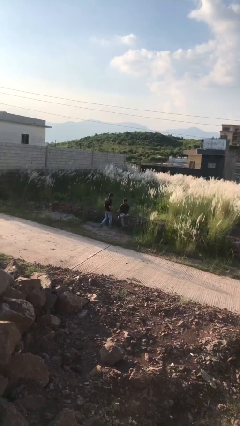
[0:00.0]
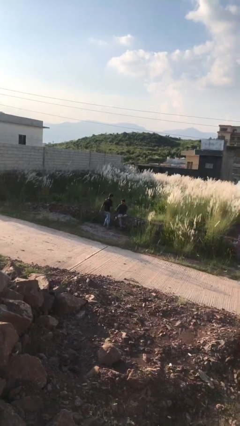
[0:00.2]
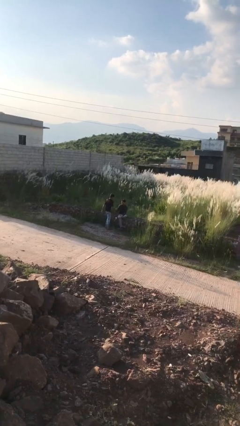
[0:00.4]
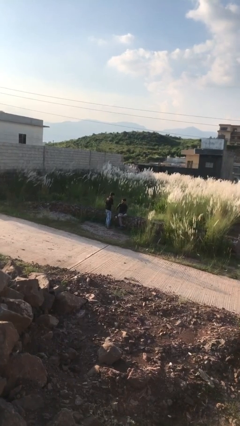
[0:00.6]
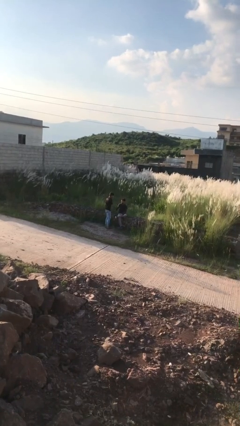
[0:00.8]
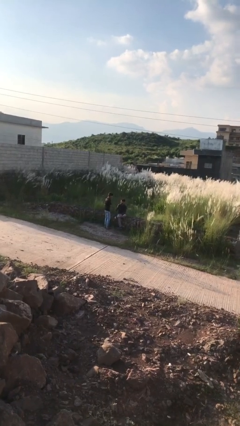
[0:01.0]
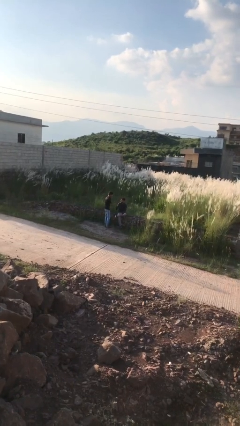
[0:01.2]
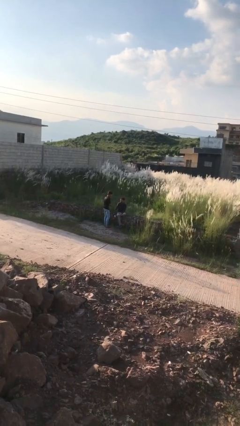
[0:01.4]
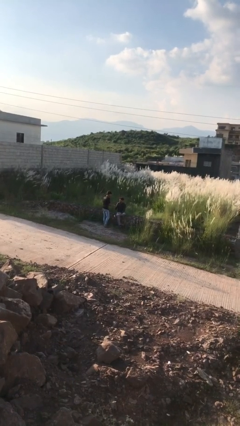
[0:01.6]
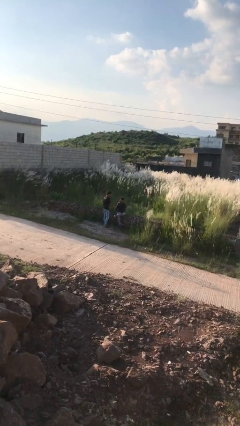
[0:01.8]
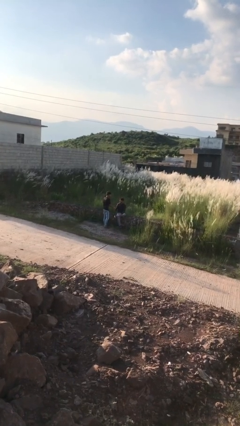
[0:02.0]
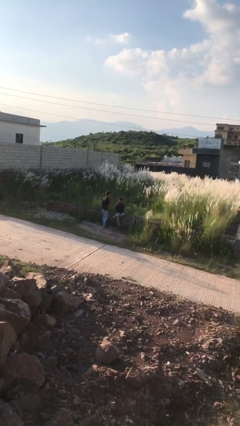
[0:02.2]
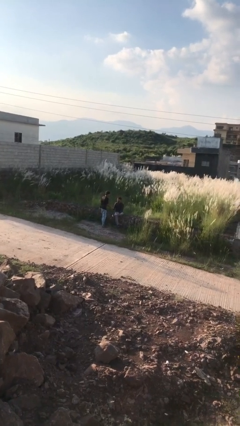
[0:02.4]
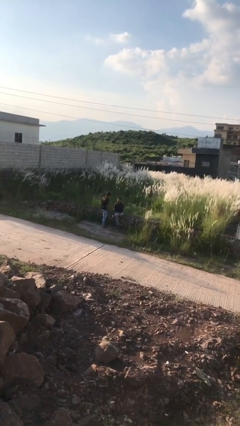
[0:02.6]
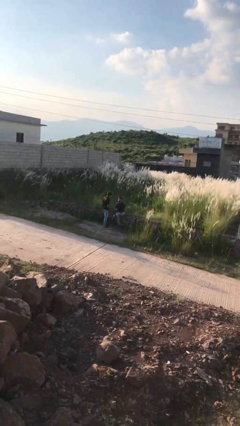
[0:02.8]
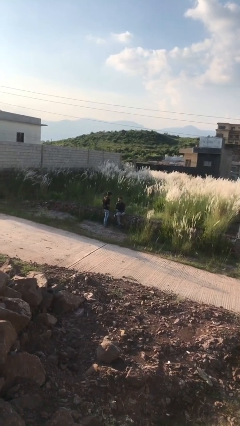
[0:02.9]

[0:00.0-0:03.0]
person shakes hand

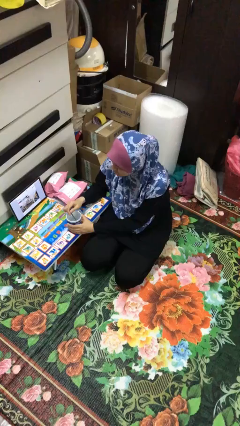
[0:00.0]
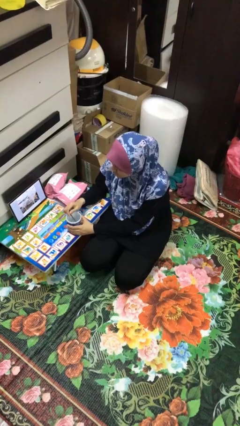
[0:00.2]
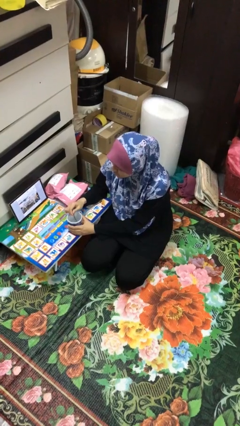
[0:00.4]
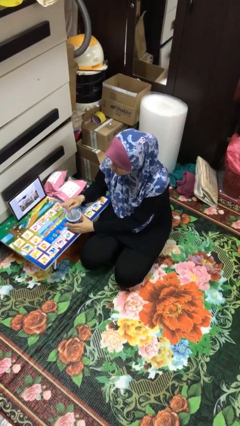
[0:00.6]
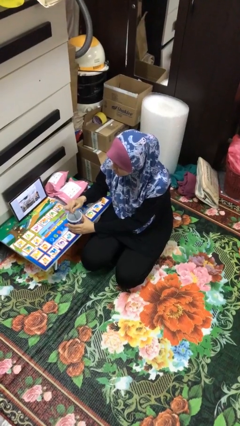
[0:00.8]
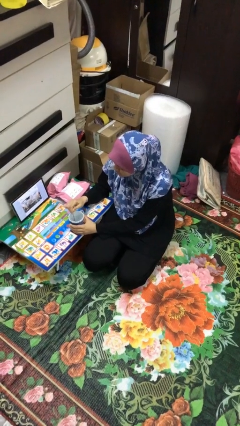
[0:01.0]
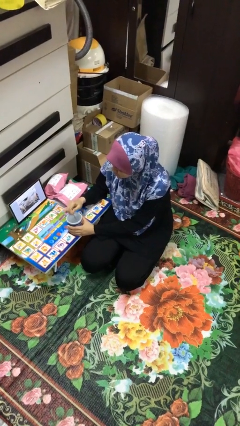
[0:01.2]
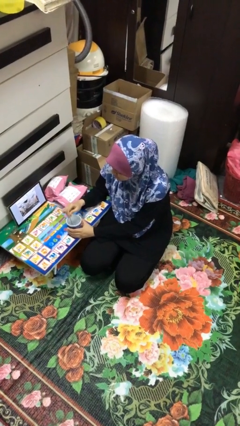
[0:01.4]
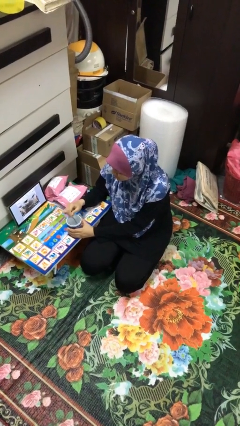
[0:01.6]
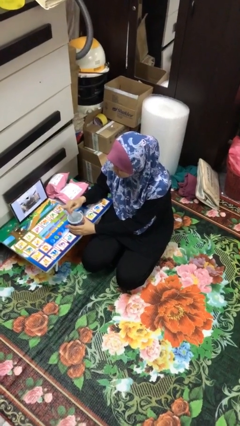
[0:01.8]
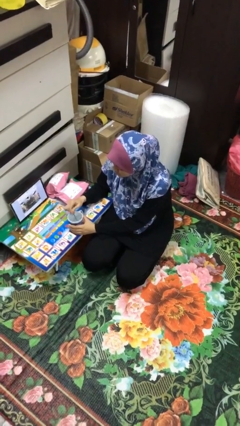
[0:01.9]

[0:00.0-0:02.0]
person stirs mug

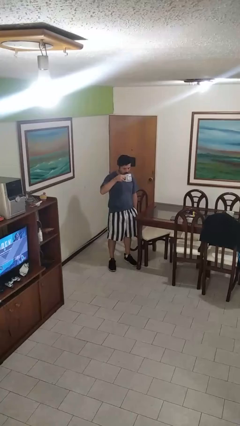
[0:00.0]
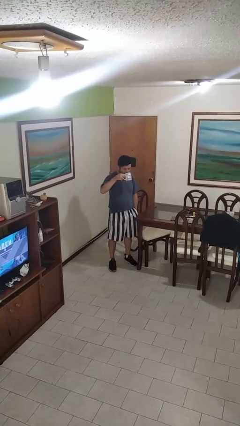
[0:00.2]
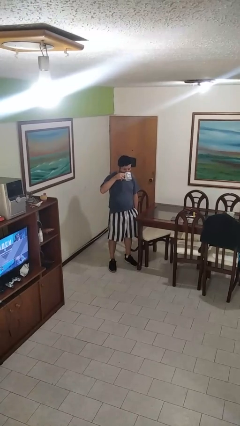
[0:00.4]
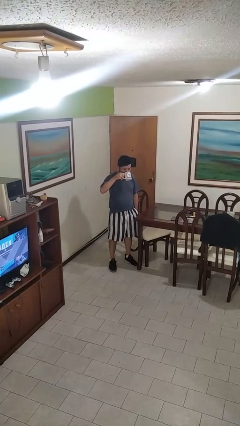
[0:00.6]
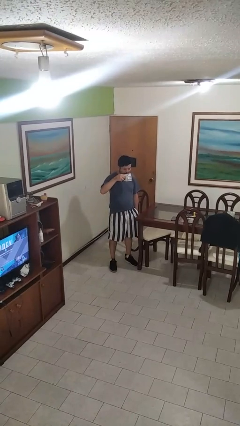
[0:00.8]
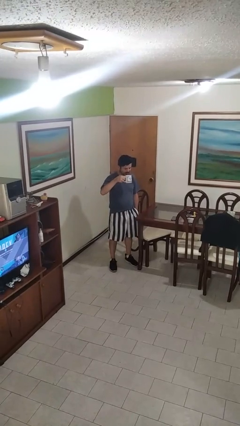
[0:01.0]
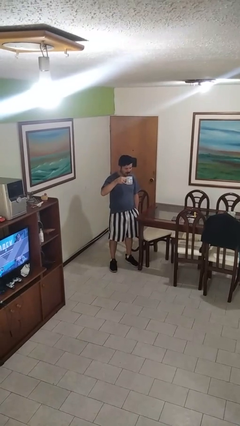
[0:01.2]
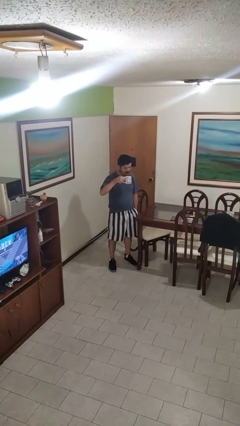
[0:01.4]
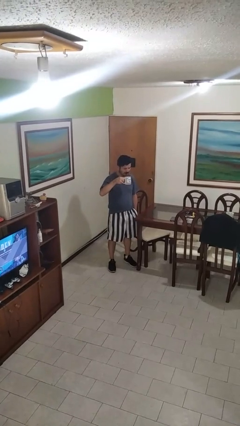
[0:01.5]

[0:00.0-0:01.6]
person drinks from mug

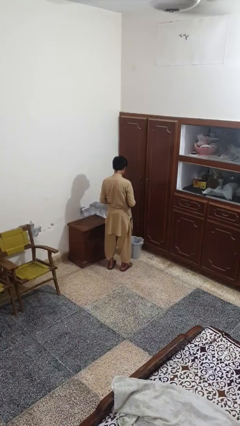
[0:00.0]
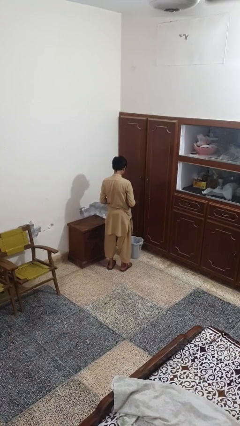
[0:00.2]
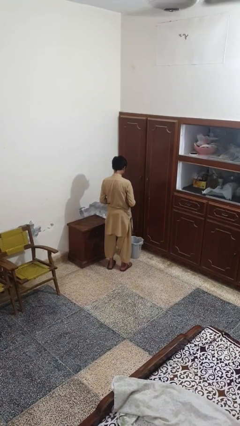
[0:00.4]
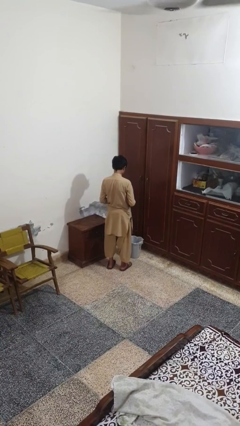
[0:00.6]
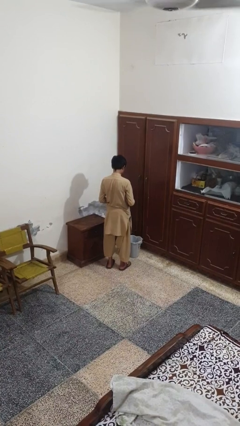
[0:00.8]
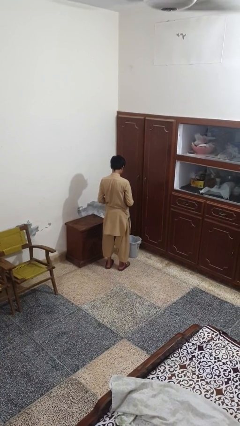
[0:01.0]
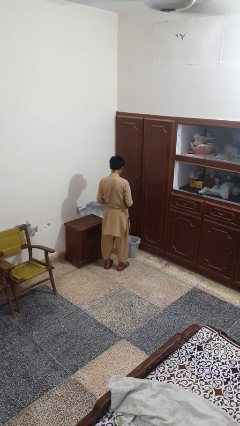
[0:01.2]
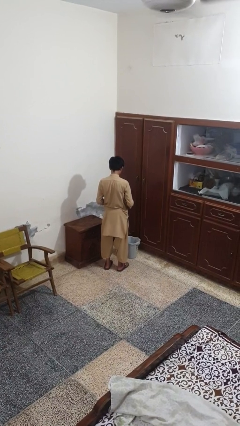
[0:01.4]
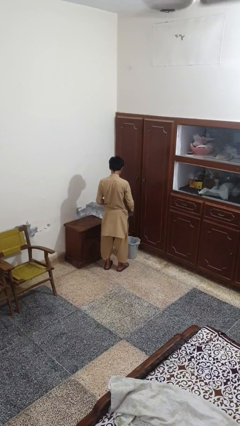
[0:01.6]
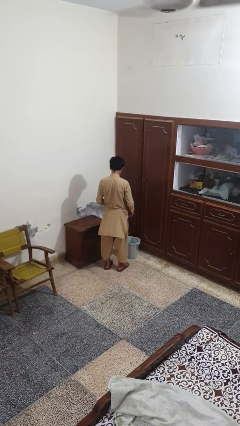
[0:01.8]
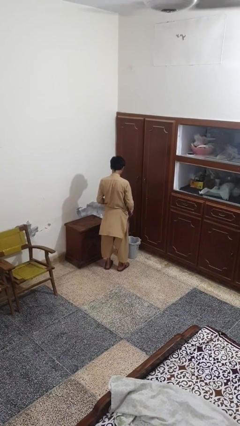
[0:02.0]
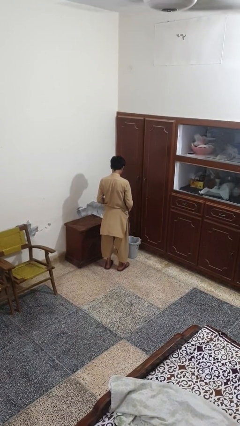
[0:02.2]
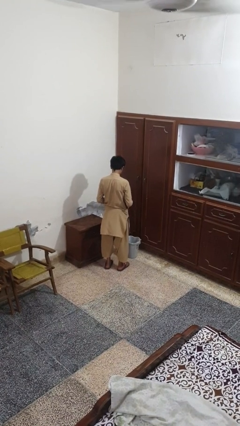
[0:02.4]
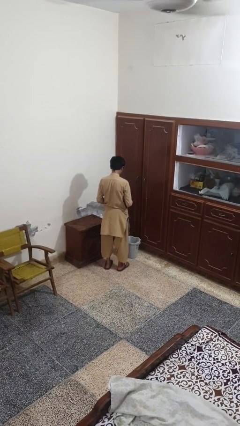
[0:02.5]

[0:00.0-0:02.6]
person discards trash

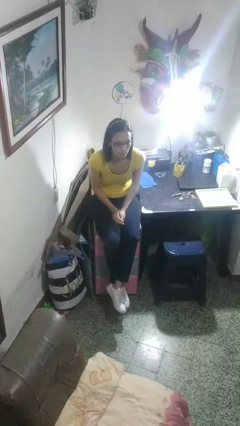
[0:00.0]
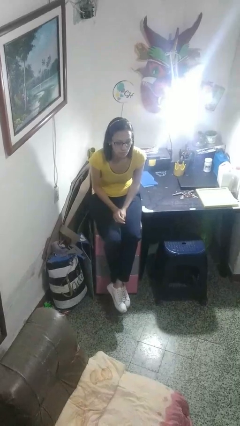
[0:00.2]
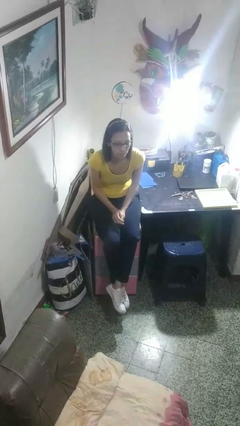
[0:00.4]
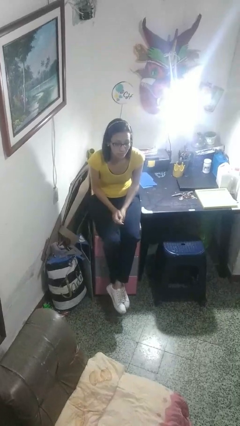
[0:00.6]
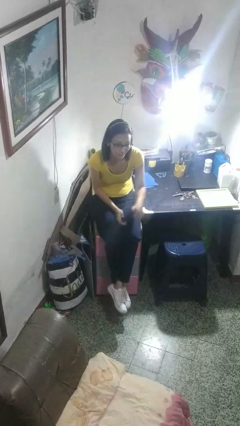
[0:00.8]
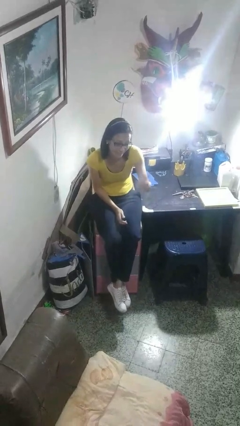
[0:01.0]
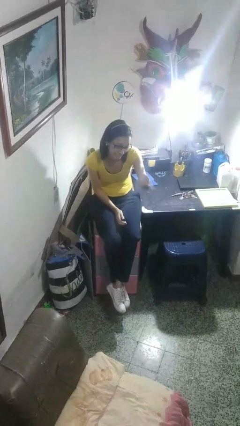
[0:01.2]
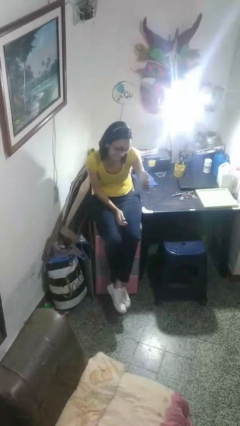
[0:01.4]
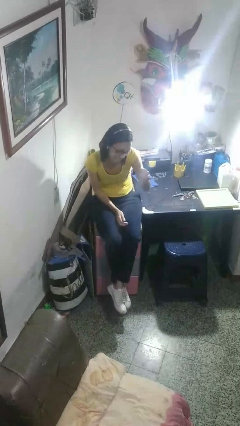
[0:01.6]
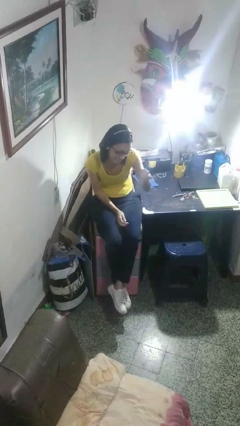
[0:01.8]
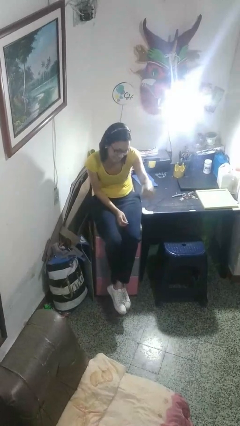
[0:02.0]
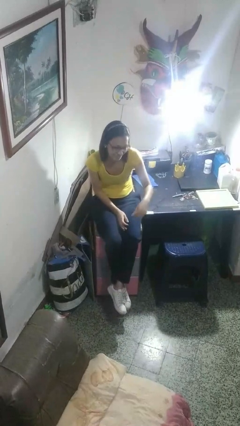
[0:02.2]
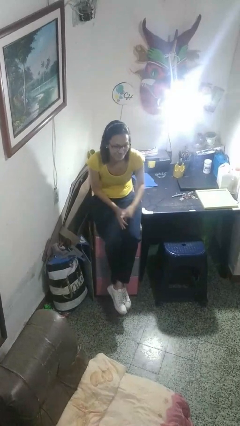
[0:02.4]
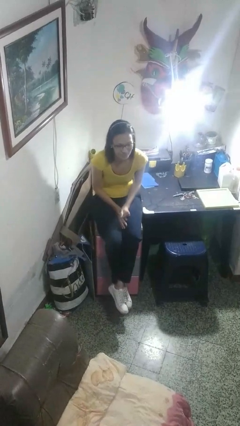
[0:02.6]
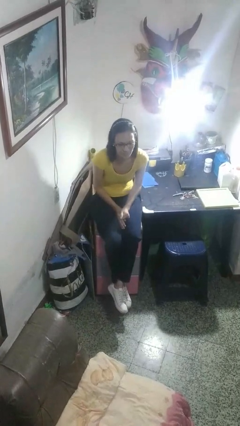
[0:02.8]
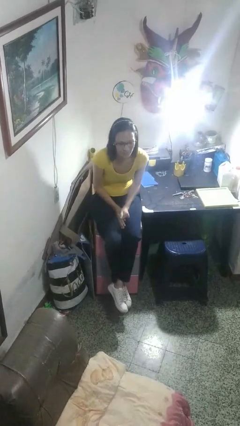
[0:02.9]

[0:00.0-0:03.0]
person gestures hang loose

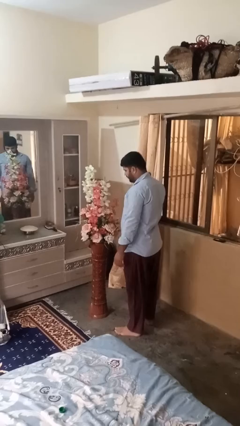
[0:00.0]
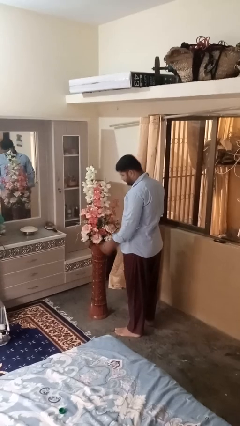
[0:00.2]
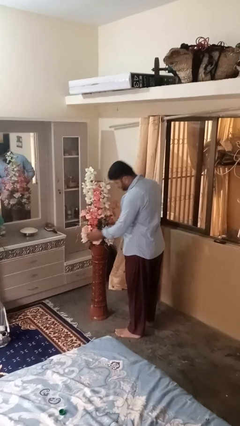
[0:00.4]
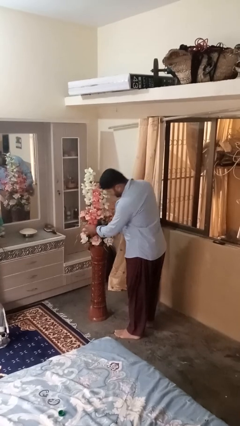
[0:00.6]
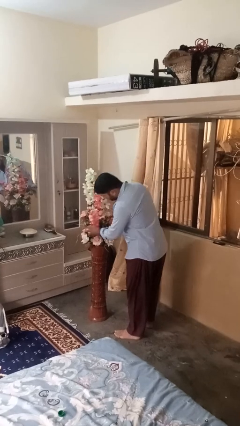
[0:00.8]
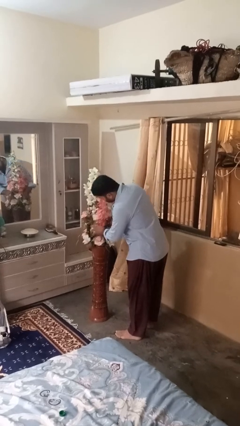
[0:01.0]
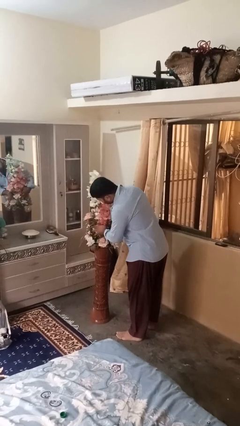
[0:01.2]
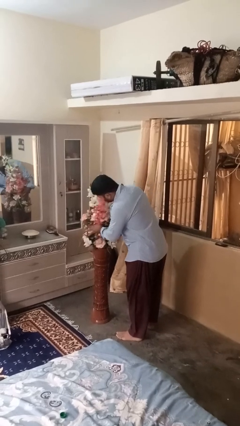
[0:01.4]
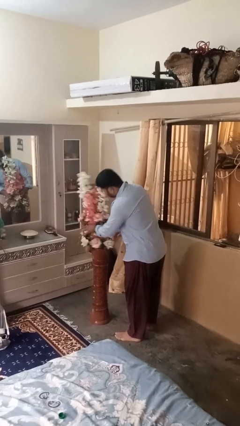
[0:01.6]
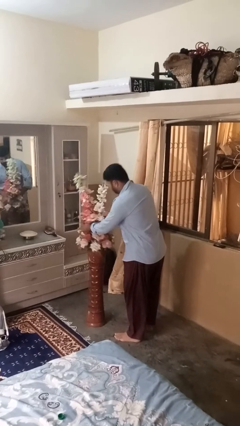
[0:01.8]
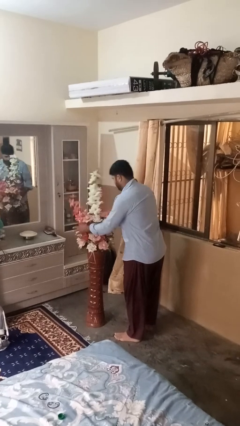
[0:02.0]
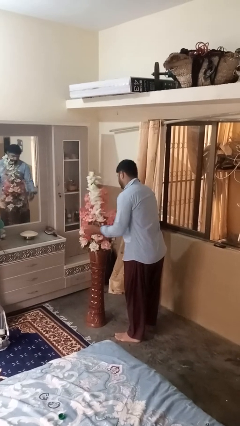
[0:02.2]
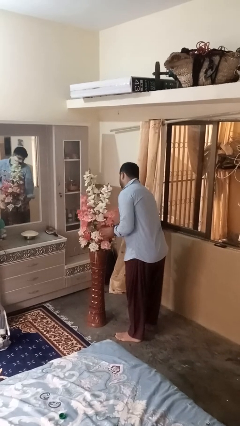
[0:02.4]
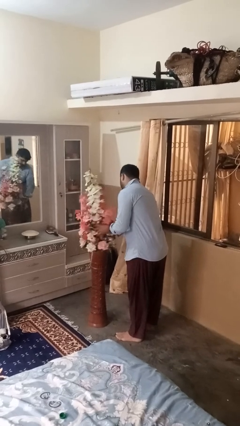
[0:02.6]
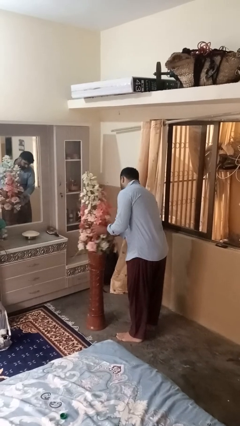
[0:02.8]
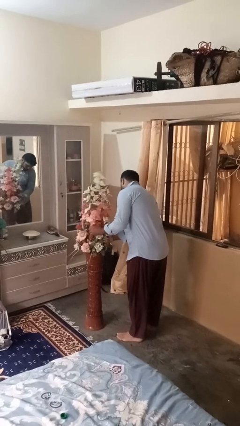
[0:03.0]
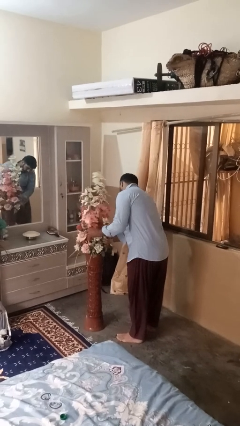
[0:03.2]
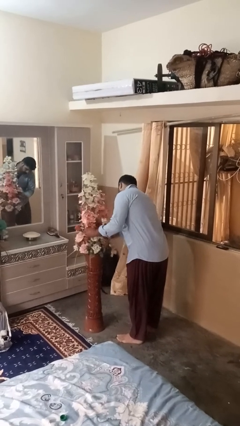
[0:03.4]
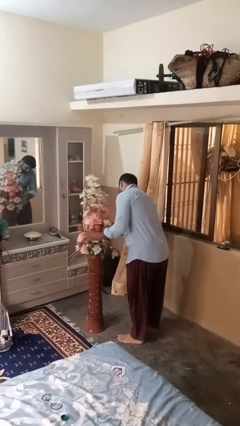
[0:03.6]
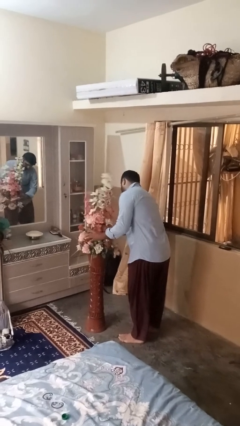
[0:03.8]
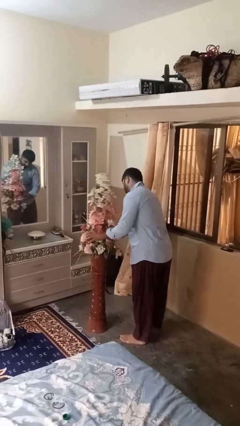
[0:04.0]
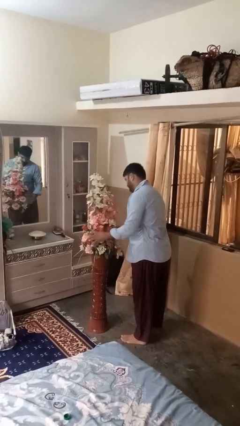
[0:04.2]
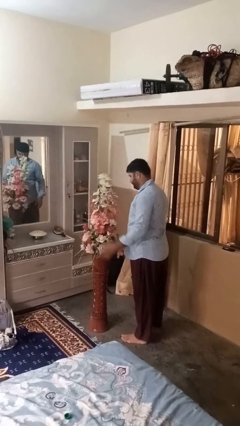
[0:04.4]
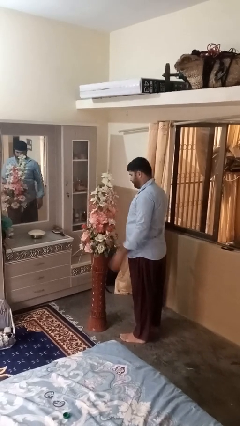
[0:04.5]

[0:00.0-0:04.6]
person arranges flowers in vase

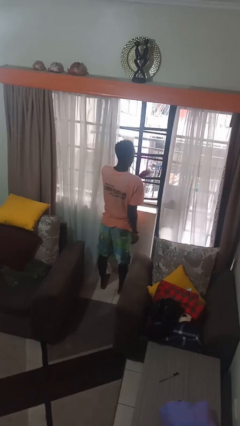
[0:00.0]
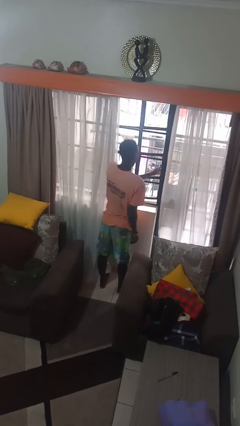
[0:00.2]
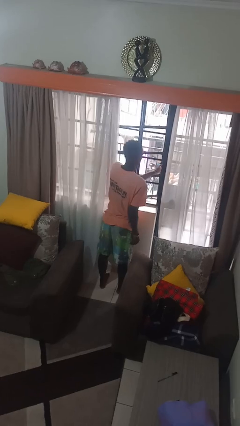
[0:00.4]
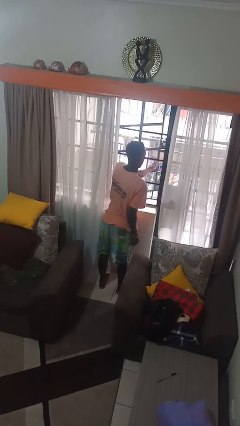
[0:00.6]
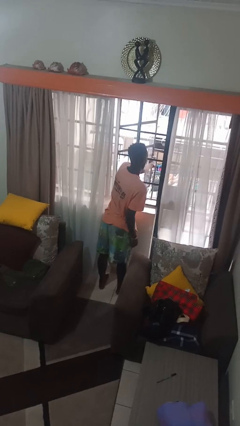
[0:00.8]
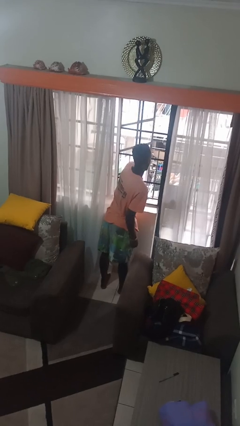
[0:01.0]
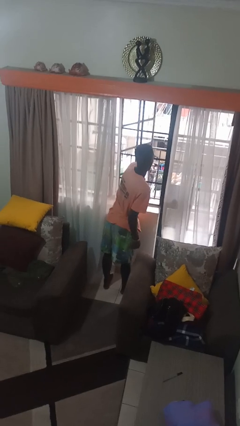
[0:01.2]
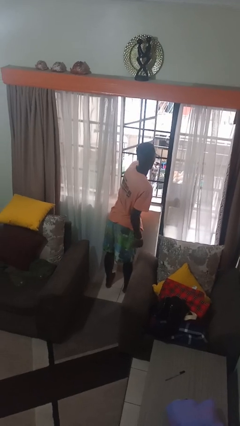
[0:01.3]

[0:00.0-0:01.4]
person opens home window
